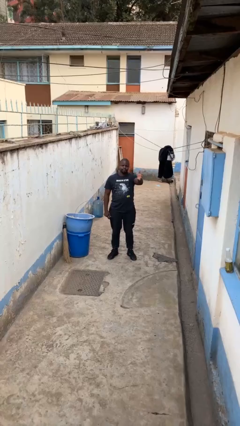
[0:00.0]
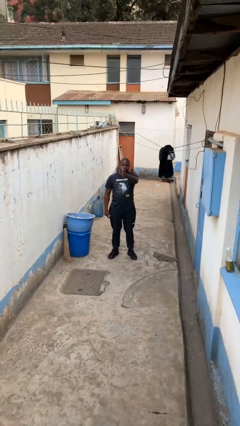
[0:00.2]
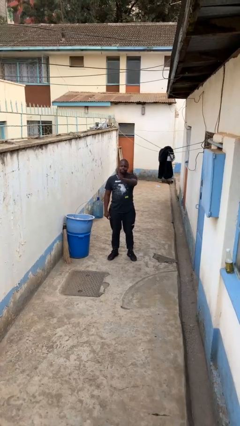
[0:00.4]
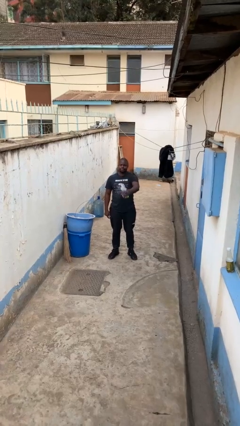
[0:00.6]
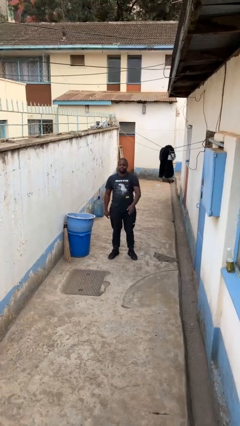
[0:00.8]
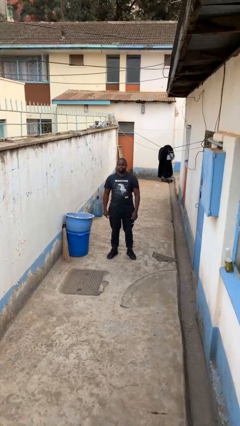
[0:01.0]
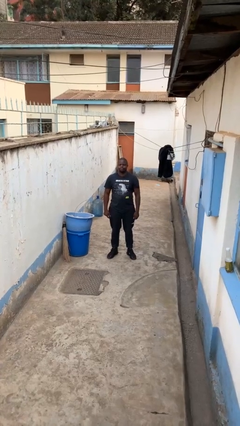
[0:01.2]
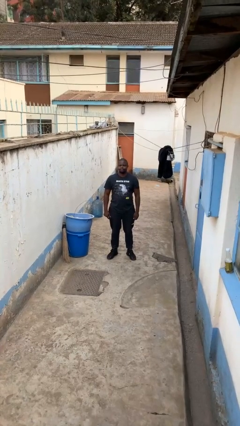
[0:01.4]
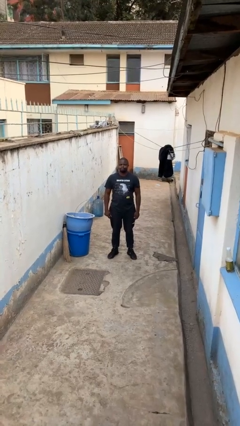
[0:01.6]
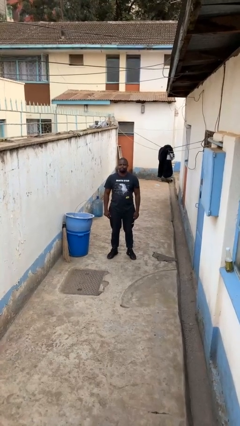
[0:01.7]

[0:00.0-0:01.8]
person gestures swipe right

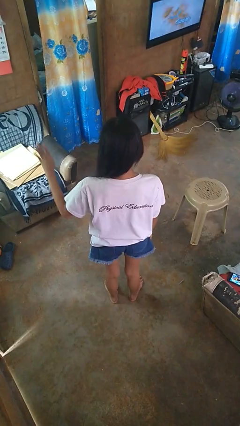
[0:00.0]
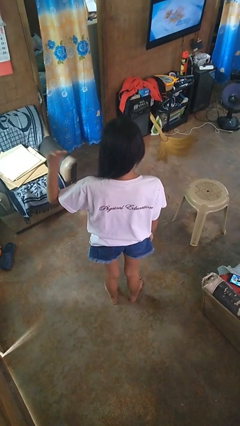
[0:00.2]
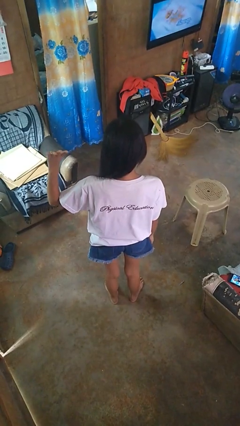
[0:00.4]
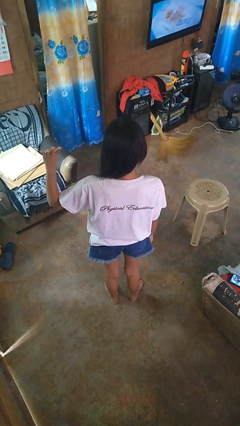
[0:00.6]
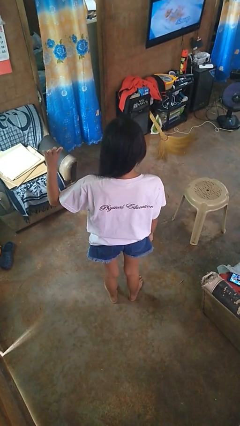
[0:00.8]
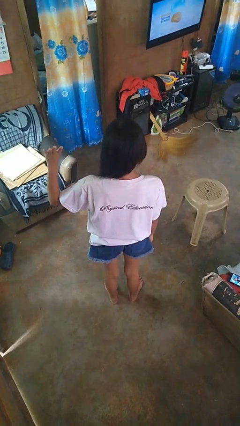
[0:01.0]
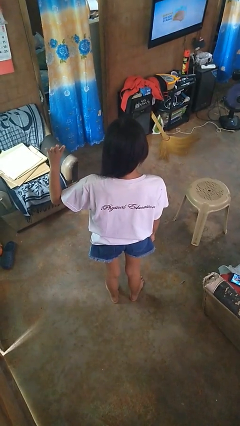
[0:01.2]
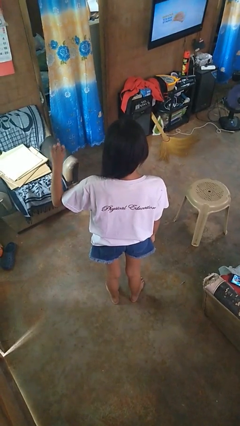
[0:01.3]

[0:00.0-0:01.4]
person gestures number four

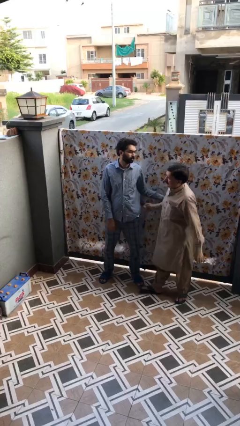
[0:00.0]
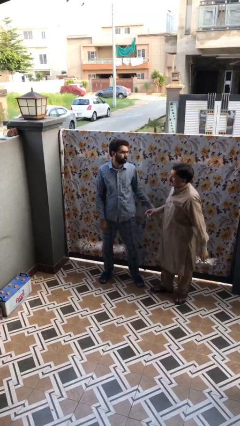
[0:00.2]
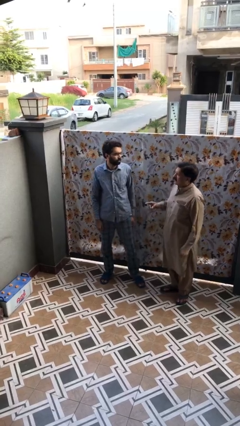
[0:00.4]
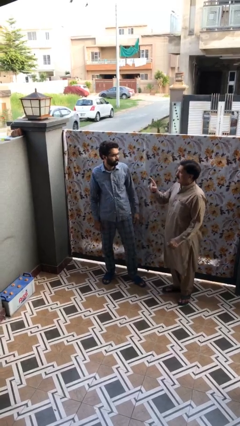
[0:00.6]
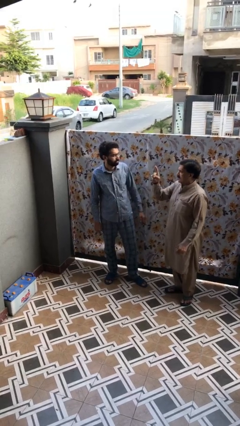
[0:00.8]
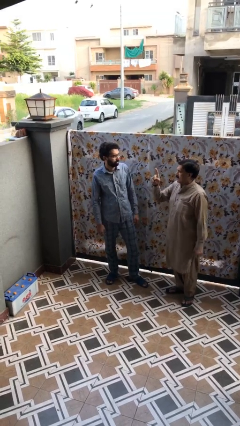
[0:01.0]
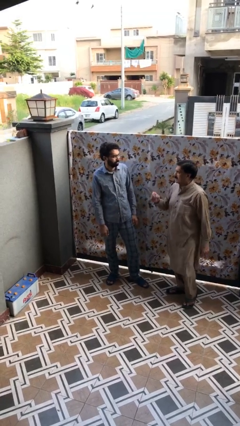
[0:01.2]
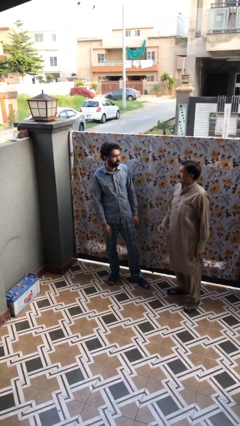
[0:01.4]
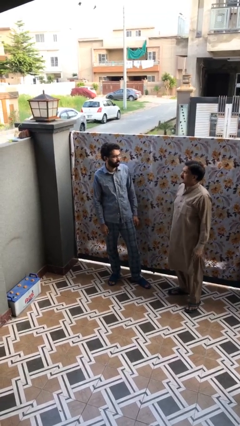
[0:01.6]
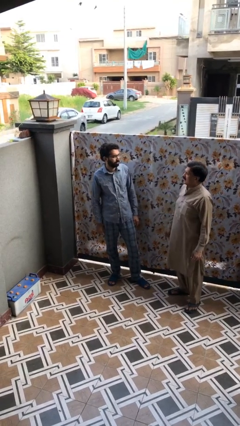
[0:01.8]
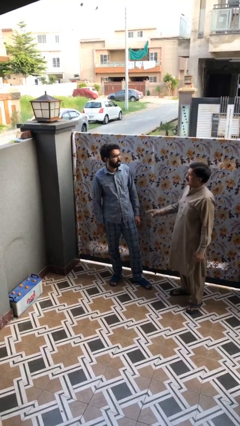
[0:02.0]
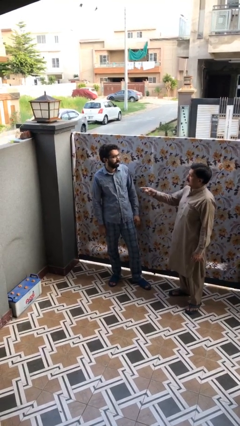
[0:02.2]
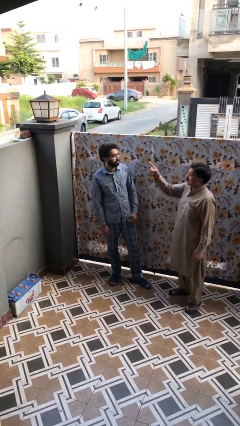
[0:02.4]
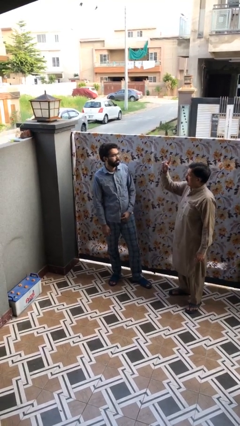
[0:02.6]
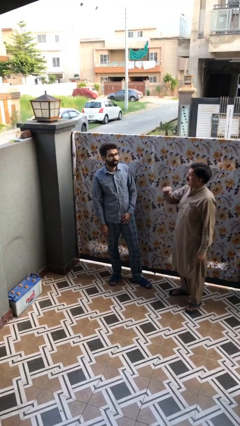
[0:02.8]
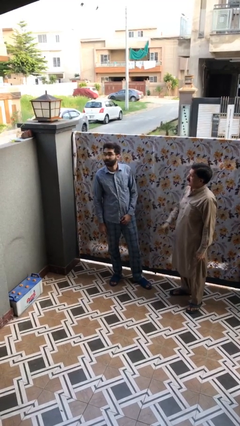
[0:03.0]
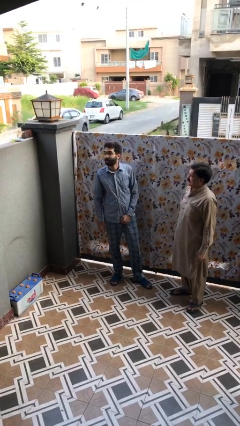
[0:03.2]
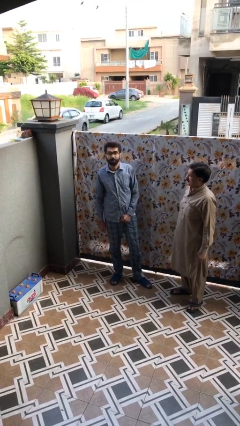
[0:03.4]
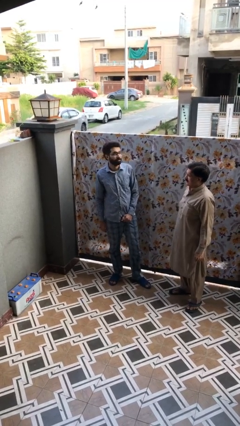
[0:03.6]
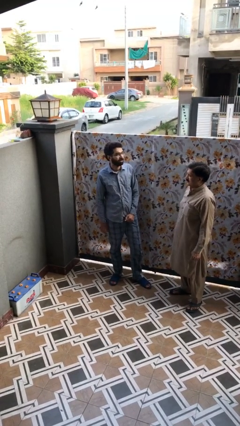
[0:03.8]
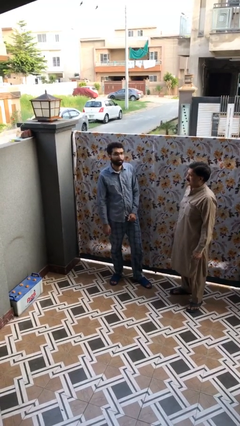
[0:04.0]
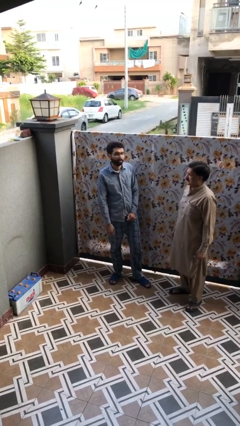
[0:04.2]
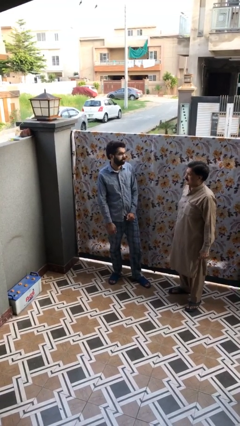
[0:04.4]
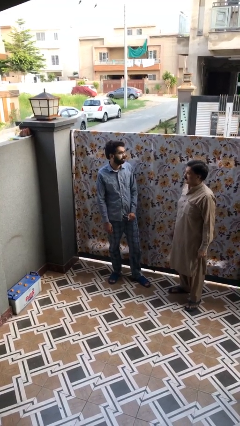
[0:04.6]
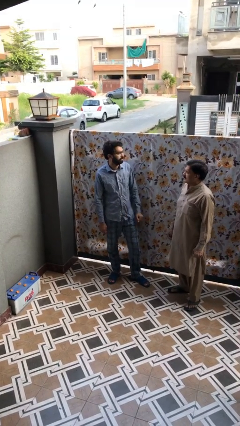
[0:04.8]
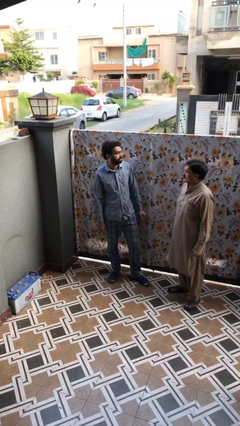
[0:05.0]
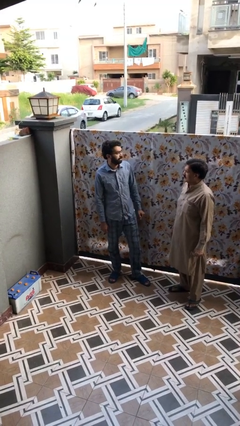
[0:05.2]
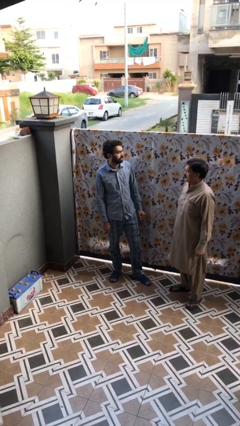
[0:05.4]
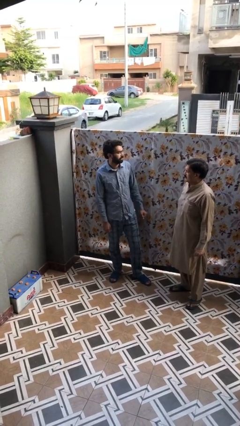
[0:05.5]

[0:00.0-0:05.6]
person talks to person

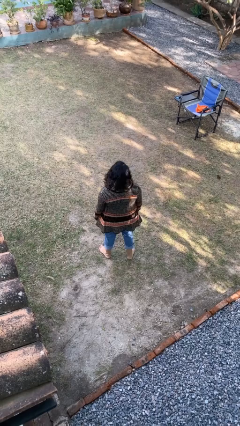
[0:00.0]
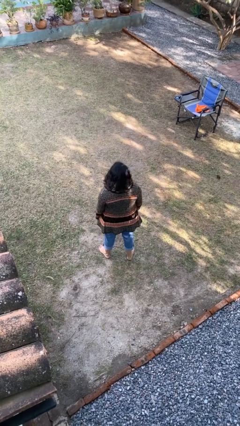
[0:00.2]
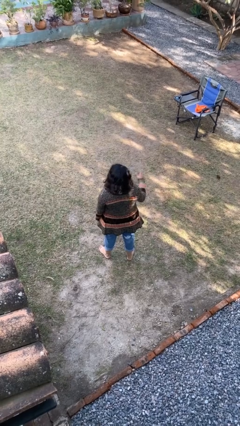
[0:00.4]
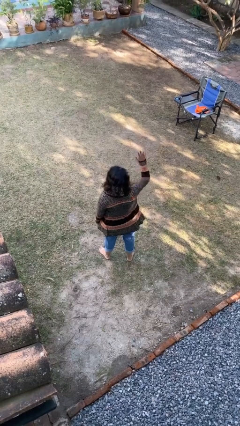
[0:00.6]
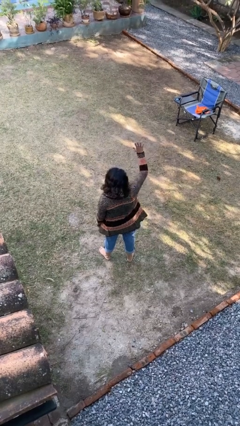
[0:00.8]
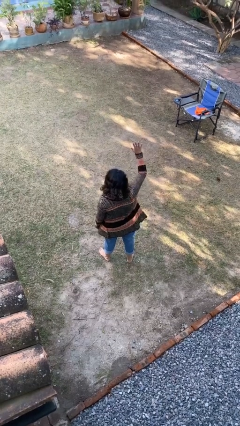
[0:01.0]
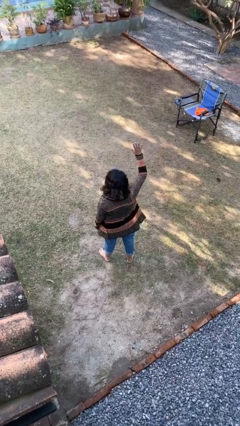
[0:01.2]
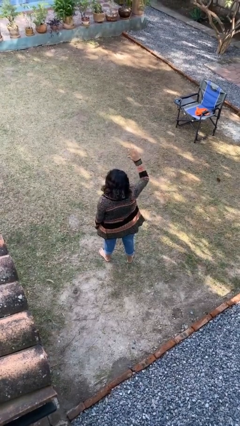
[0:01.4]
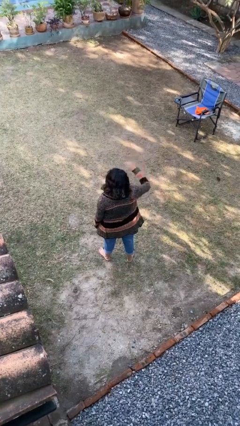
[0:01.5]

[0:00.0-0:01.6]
person gestures number five

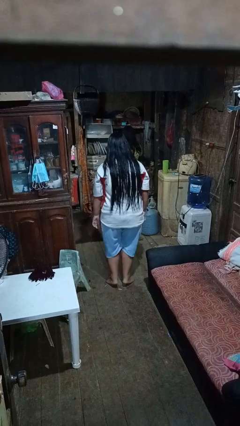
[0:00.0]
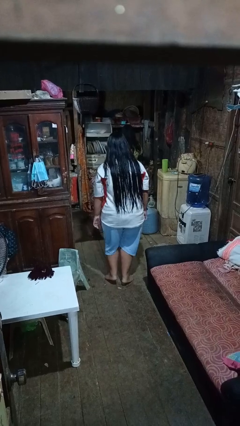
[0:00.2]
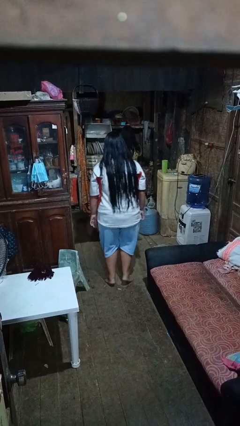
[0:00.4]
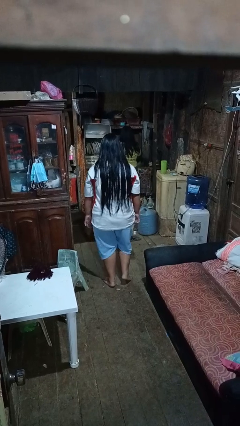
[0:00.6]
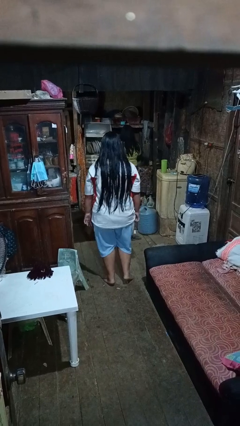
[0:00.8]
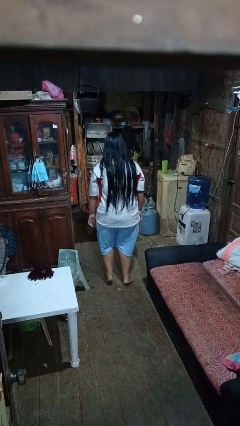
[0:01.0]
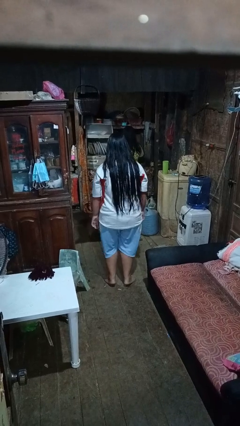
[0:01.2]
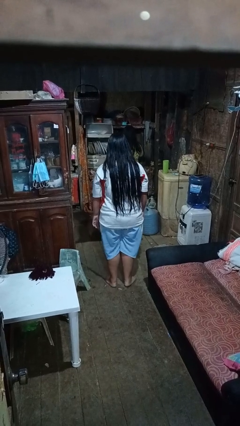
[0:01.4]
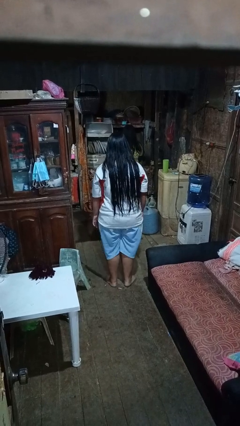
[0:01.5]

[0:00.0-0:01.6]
person walks tiptoe

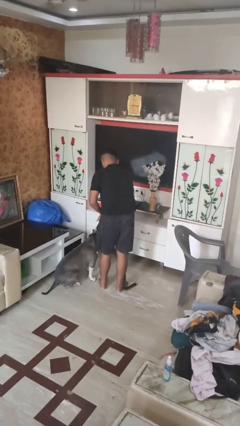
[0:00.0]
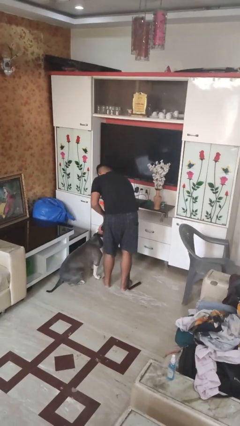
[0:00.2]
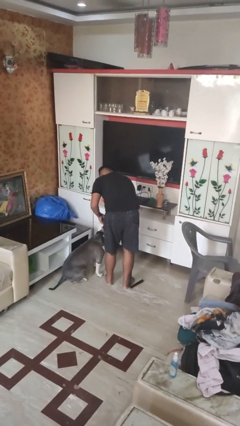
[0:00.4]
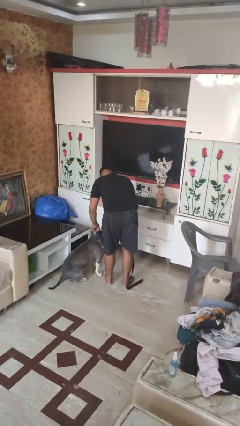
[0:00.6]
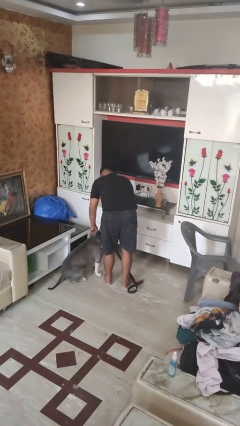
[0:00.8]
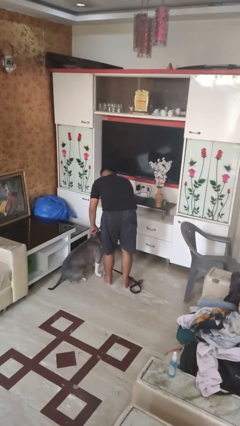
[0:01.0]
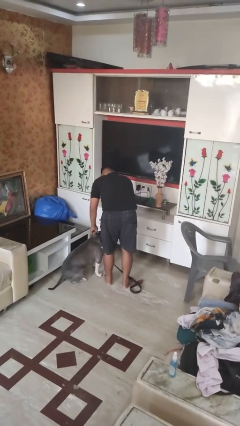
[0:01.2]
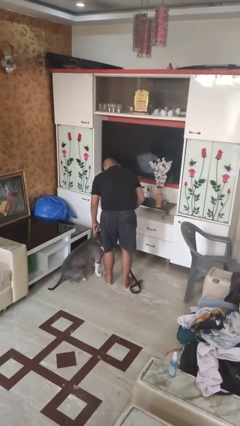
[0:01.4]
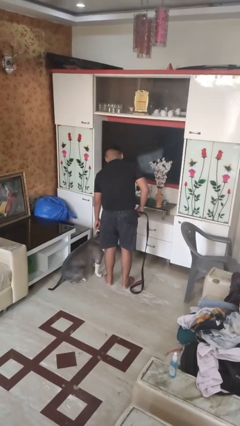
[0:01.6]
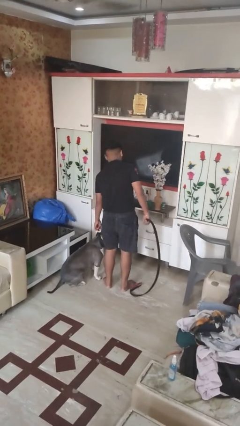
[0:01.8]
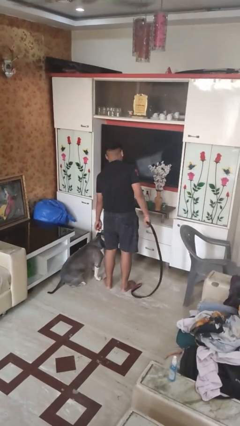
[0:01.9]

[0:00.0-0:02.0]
person unattaches leash from dog

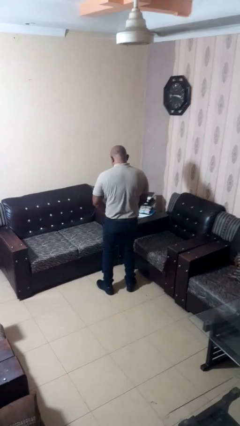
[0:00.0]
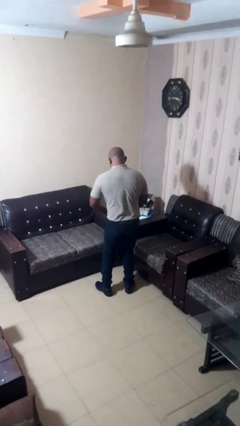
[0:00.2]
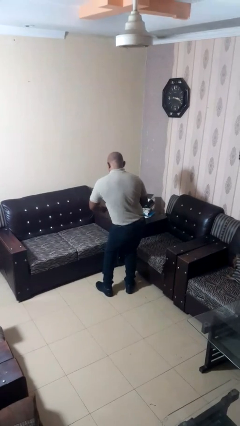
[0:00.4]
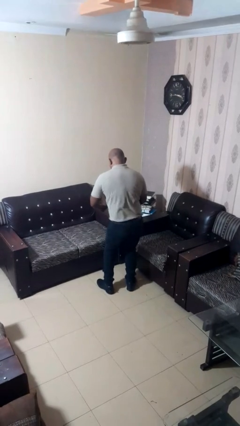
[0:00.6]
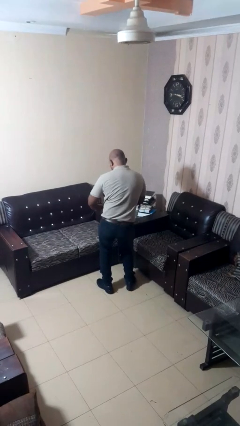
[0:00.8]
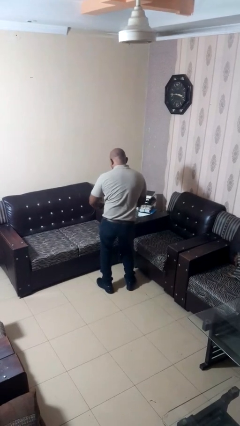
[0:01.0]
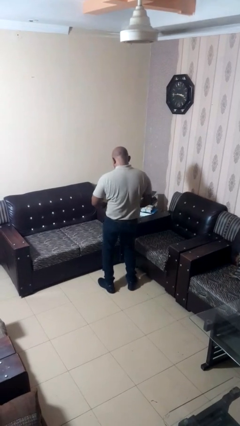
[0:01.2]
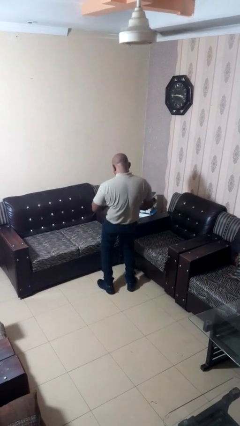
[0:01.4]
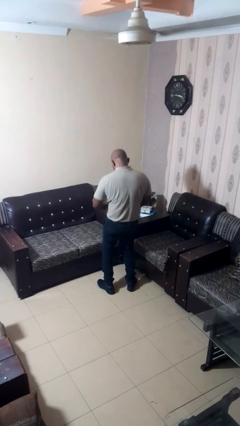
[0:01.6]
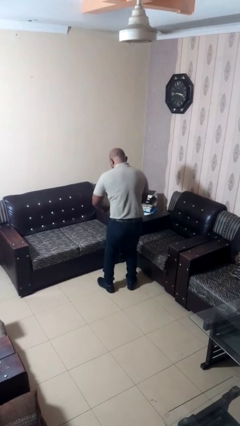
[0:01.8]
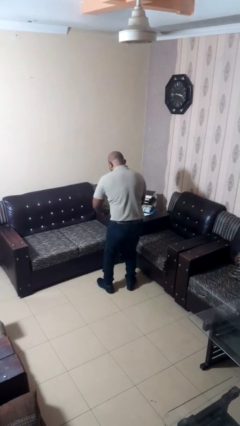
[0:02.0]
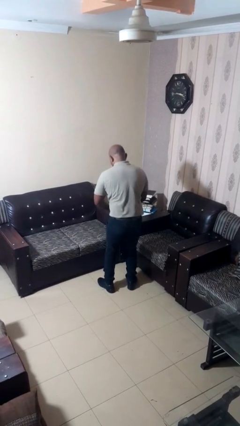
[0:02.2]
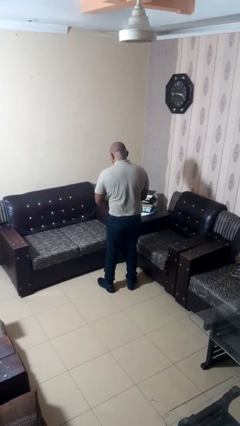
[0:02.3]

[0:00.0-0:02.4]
person wiggles hips

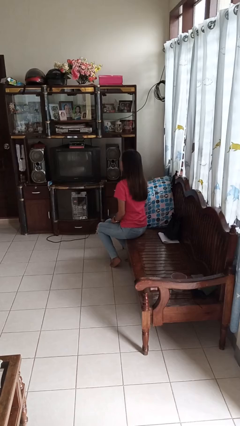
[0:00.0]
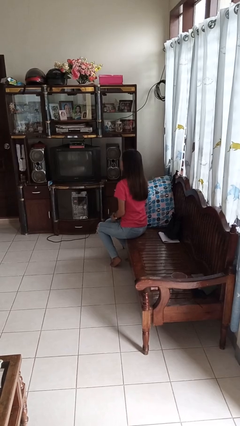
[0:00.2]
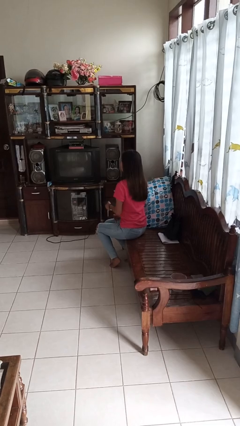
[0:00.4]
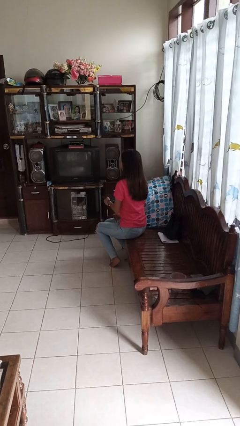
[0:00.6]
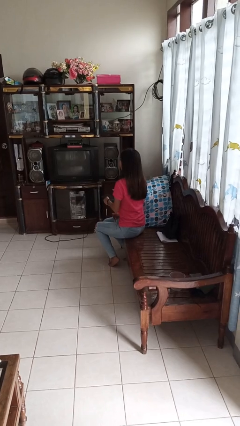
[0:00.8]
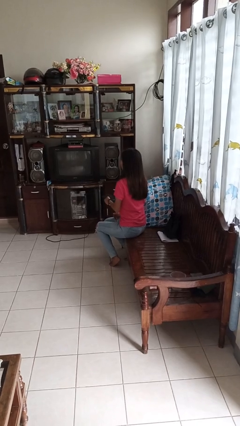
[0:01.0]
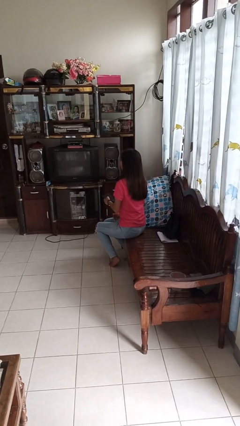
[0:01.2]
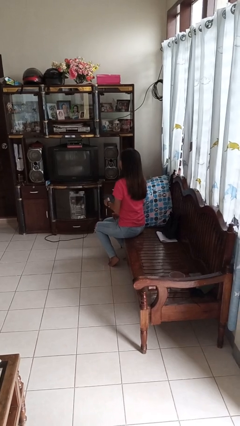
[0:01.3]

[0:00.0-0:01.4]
person uses television remote
